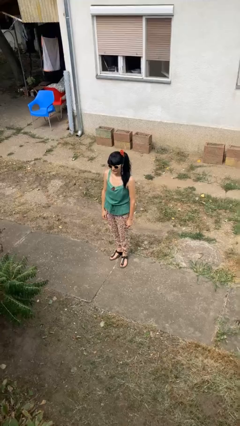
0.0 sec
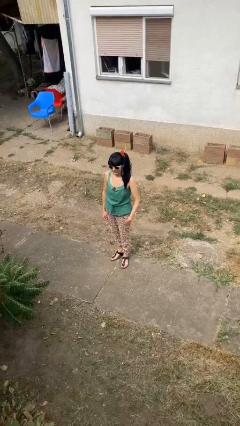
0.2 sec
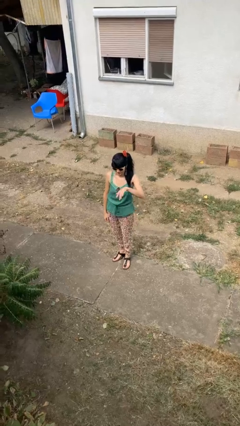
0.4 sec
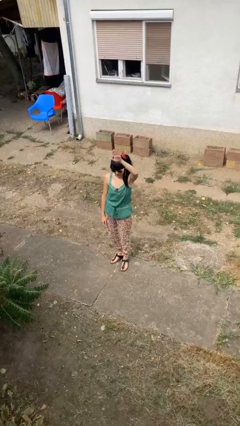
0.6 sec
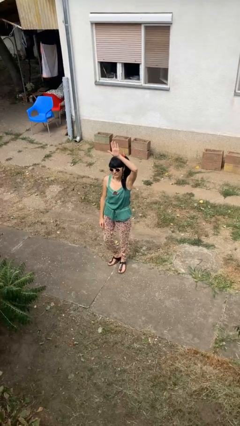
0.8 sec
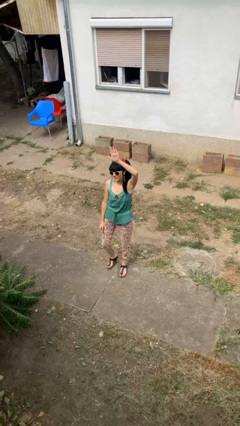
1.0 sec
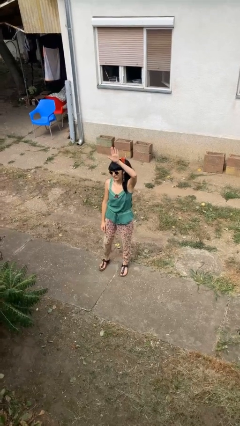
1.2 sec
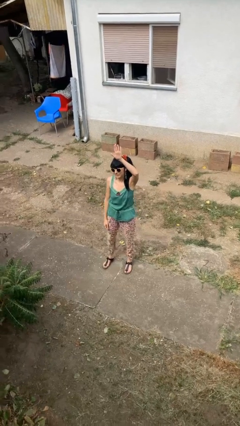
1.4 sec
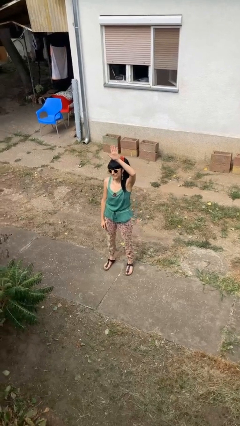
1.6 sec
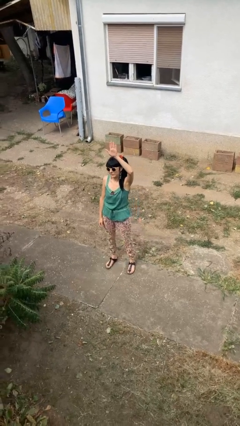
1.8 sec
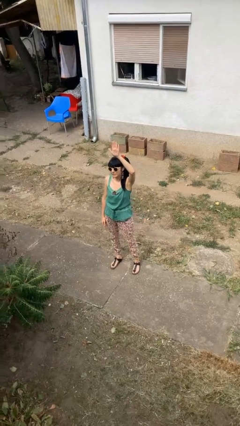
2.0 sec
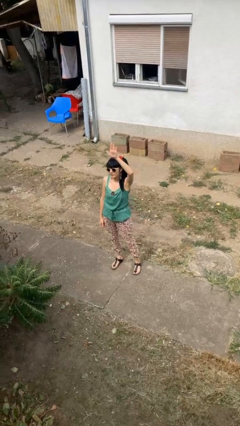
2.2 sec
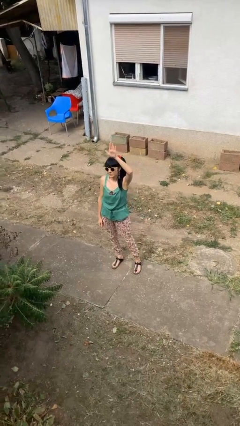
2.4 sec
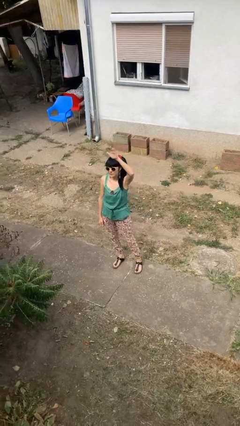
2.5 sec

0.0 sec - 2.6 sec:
person gestures raise hand

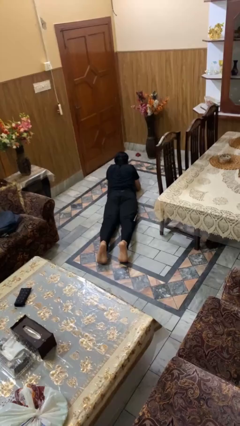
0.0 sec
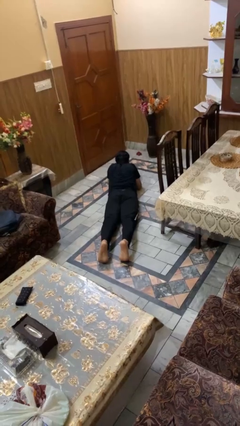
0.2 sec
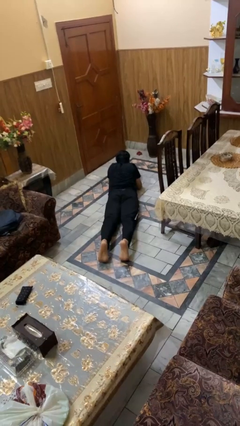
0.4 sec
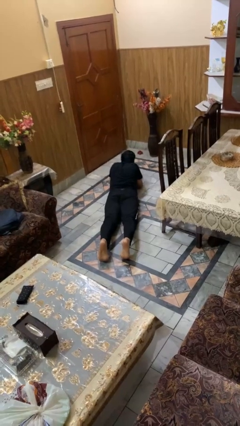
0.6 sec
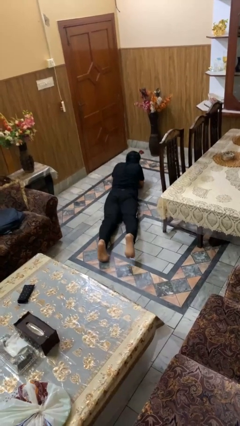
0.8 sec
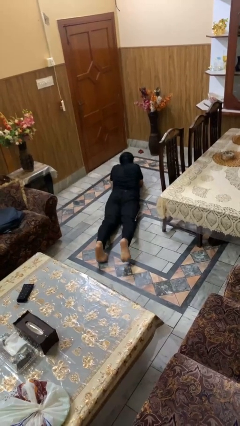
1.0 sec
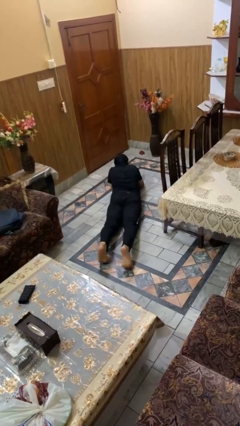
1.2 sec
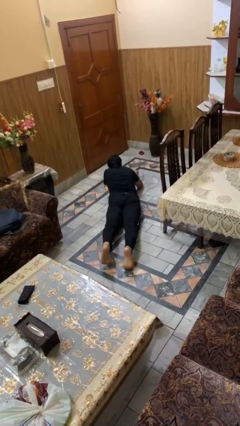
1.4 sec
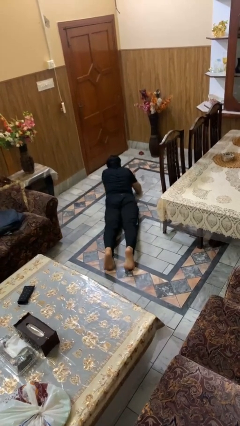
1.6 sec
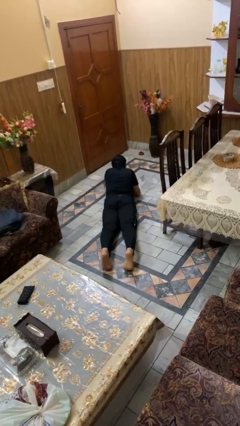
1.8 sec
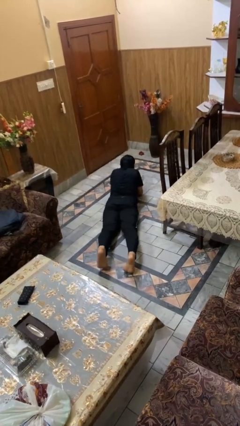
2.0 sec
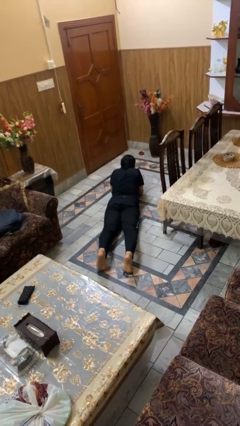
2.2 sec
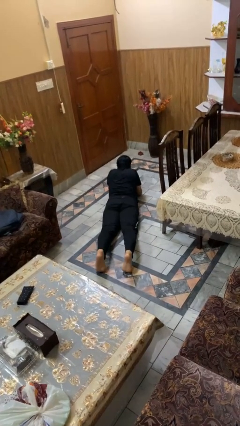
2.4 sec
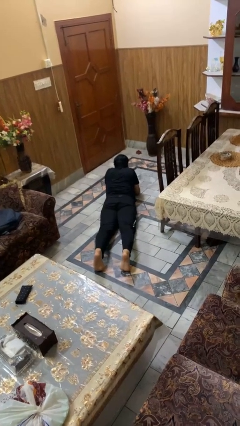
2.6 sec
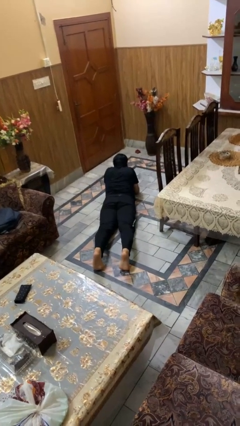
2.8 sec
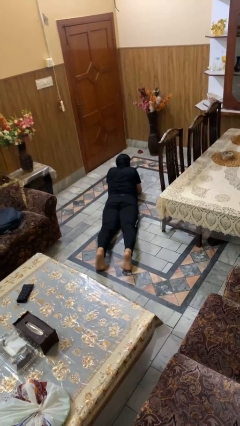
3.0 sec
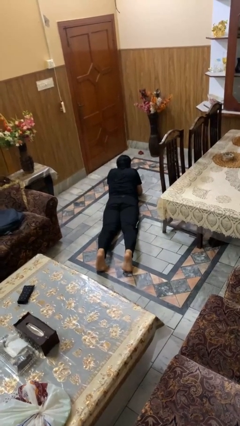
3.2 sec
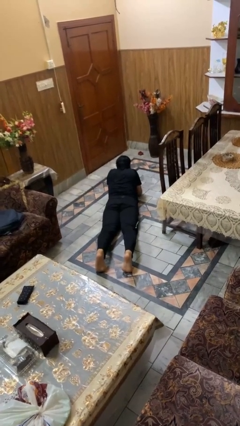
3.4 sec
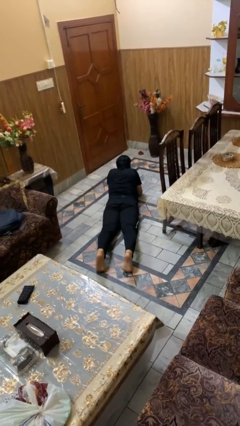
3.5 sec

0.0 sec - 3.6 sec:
person crawls

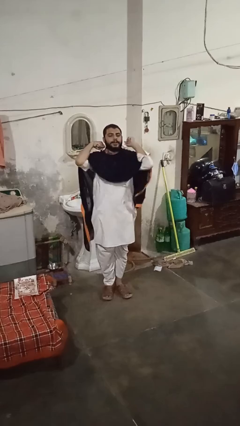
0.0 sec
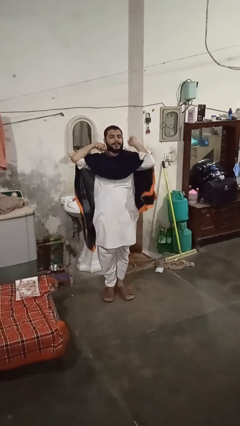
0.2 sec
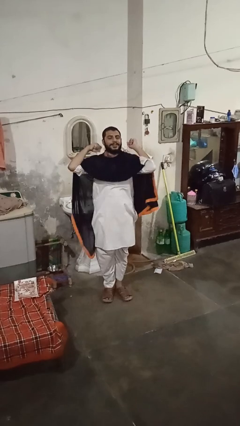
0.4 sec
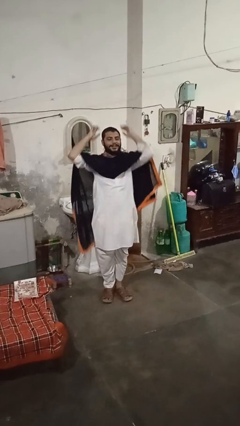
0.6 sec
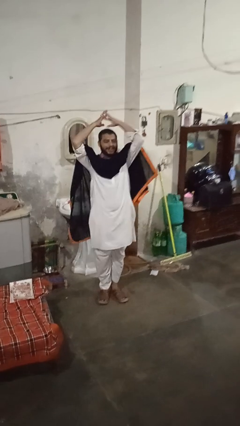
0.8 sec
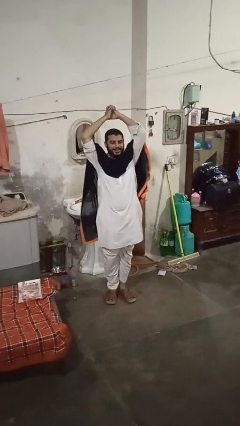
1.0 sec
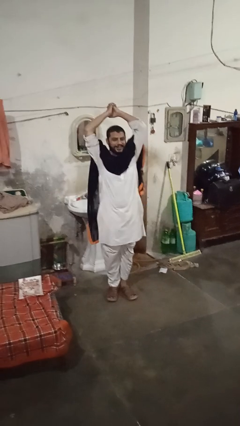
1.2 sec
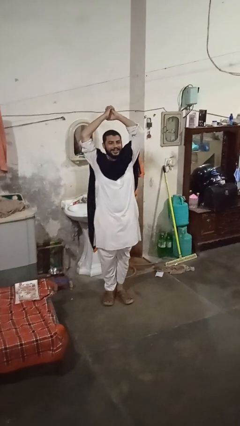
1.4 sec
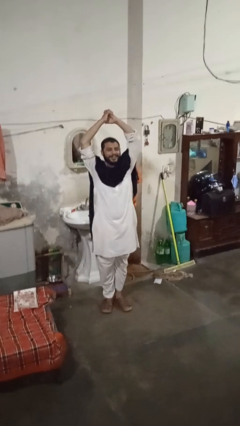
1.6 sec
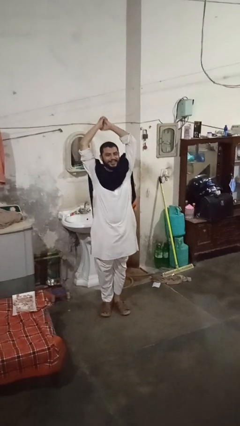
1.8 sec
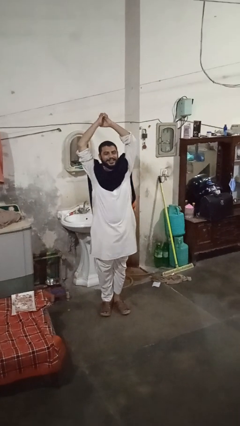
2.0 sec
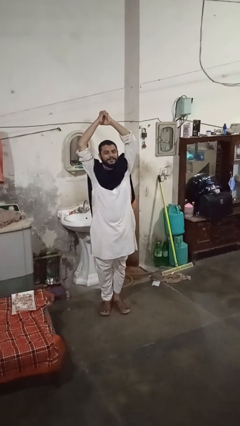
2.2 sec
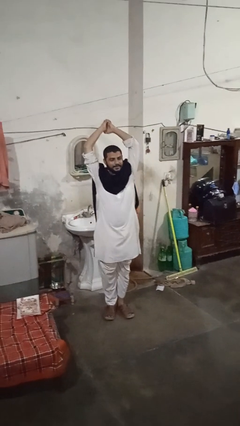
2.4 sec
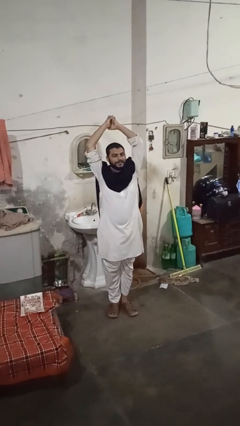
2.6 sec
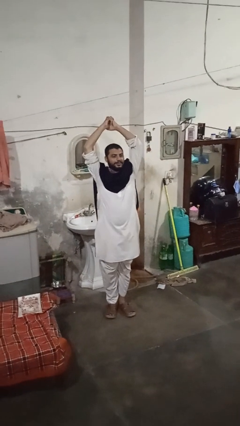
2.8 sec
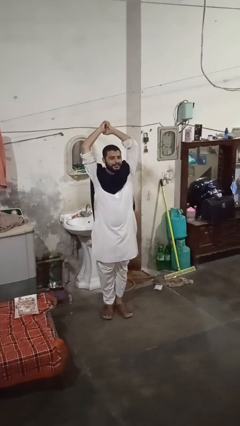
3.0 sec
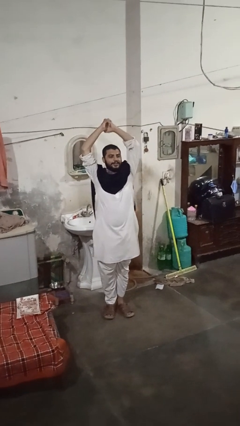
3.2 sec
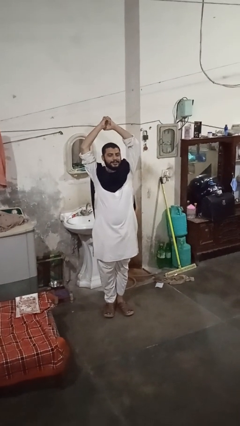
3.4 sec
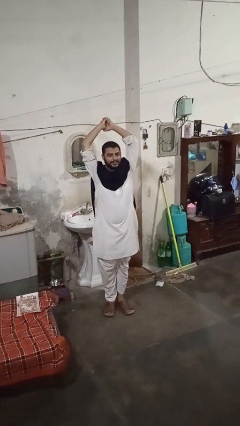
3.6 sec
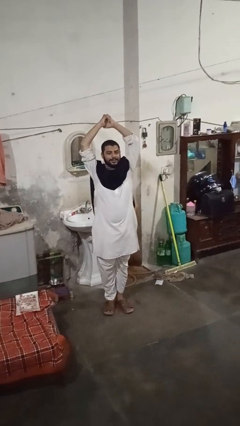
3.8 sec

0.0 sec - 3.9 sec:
person stretches arms over head

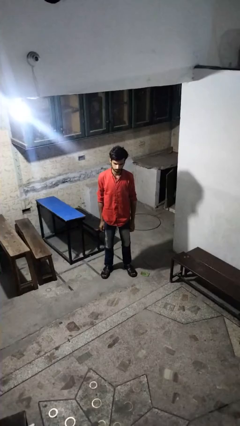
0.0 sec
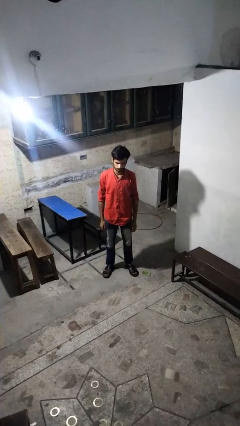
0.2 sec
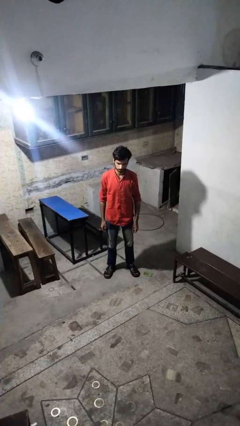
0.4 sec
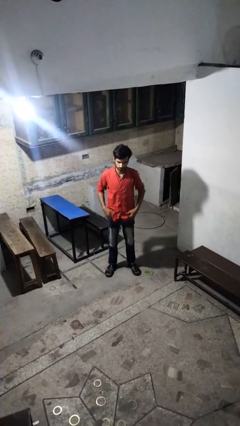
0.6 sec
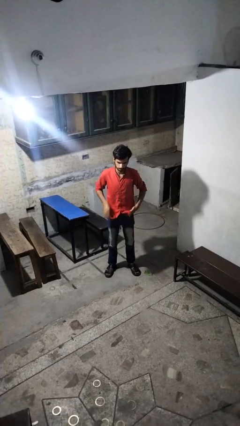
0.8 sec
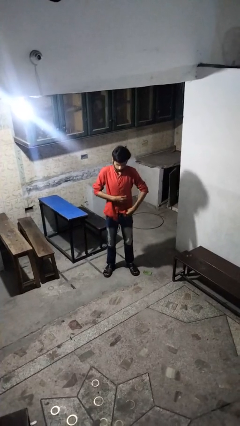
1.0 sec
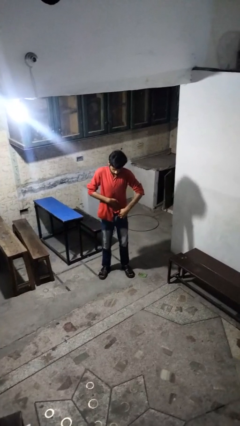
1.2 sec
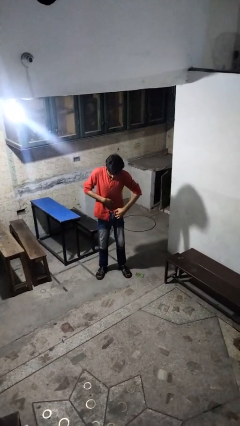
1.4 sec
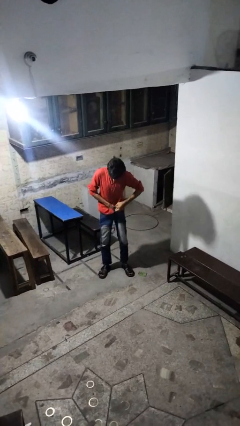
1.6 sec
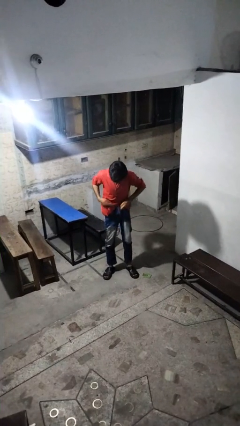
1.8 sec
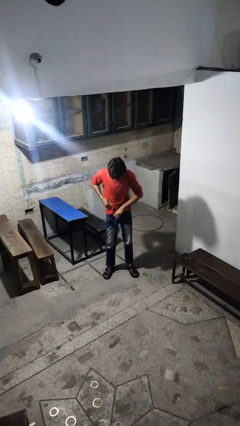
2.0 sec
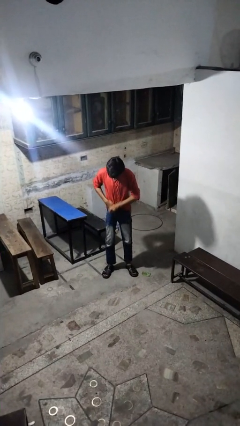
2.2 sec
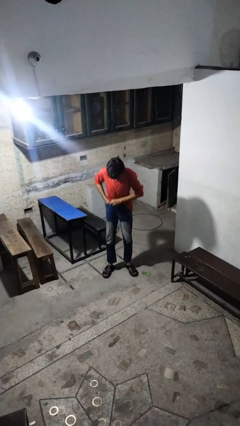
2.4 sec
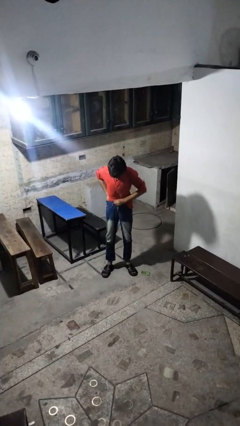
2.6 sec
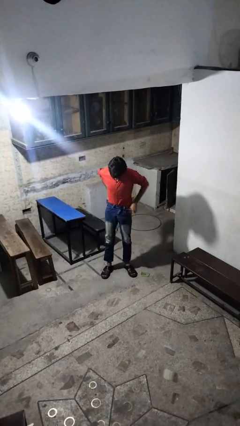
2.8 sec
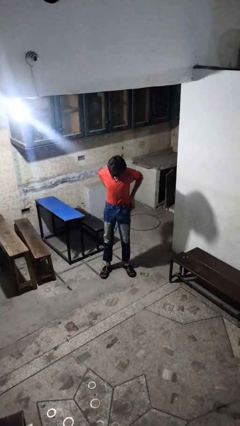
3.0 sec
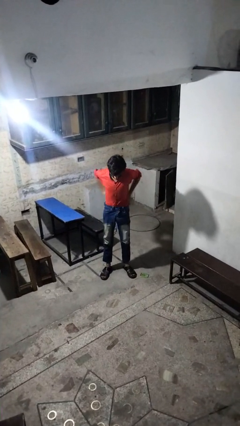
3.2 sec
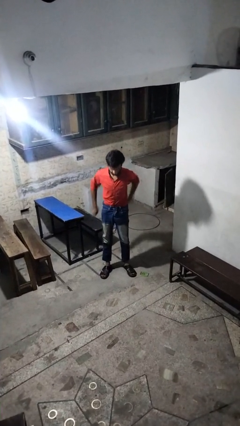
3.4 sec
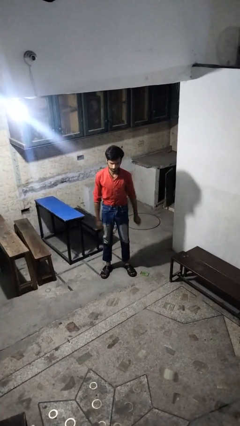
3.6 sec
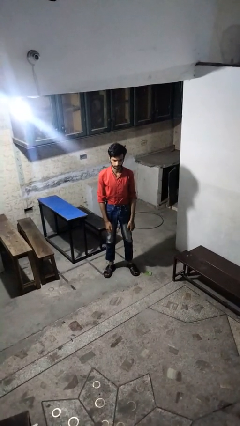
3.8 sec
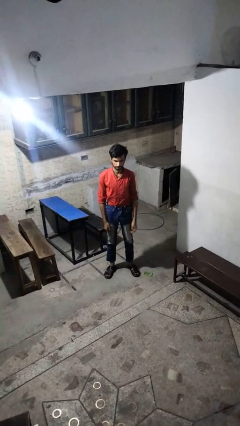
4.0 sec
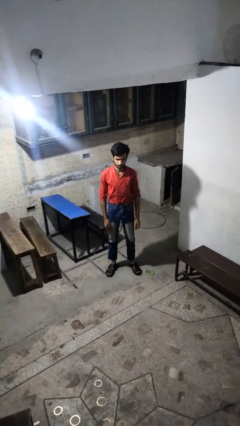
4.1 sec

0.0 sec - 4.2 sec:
person tucks in shirt

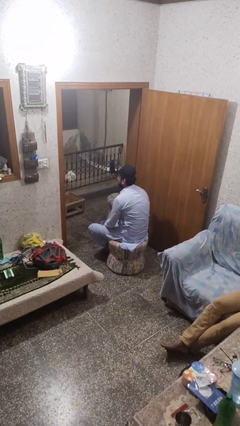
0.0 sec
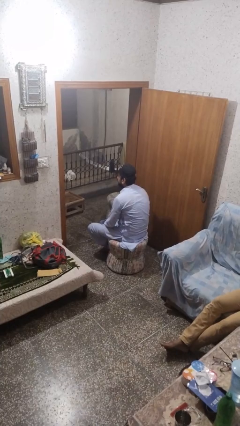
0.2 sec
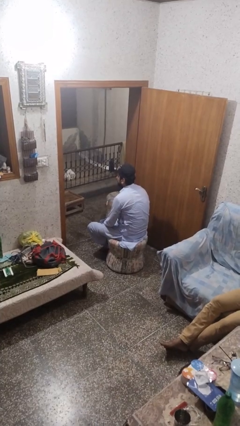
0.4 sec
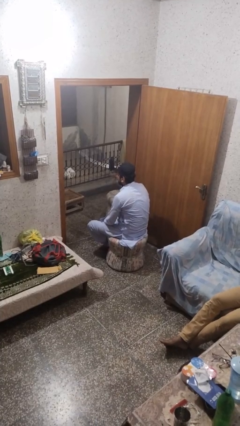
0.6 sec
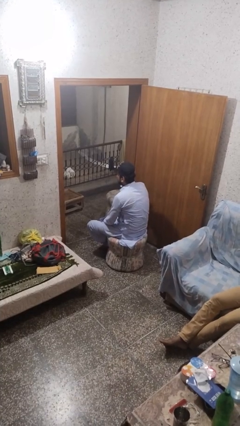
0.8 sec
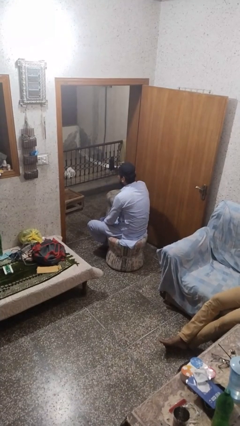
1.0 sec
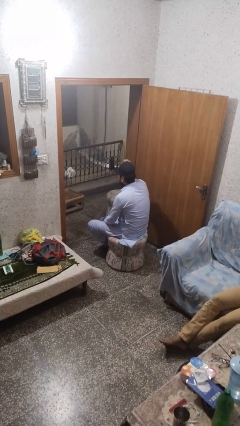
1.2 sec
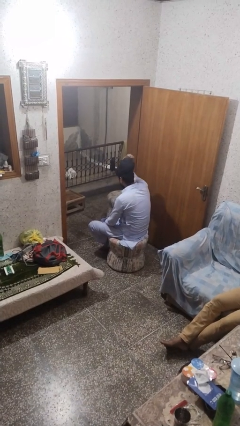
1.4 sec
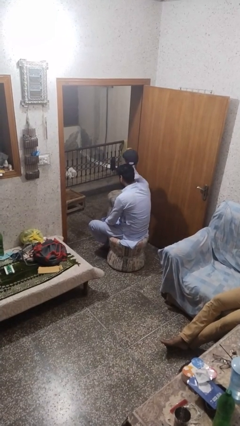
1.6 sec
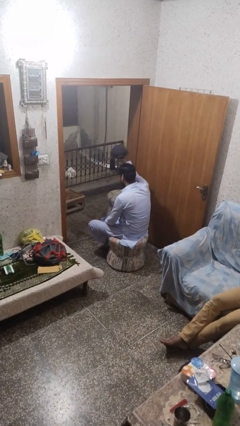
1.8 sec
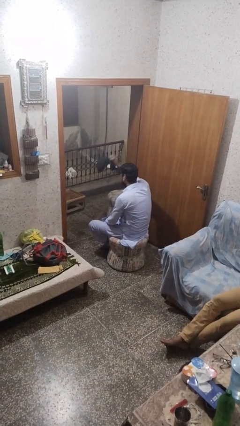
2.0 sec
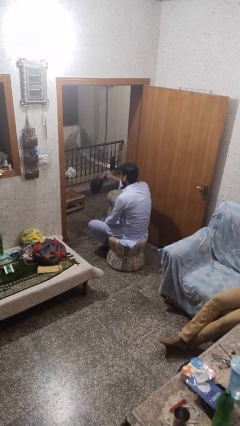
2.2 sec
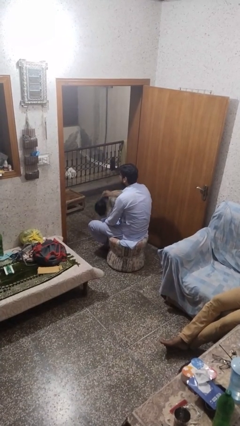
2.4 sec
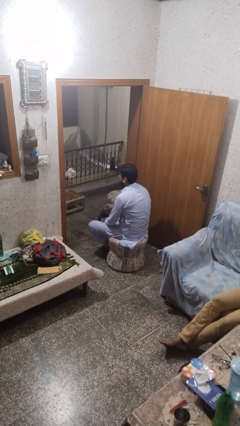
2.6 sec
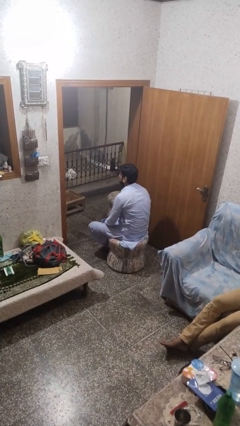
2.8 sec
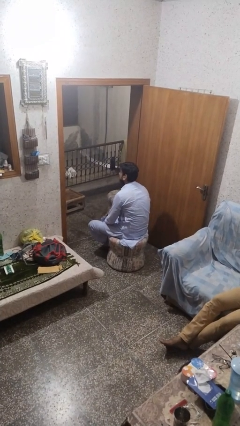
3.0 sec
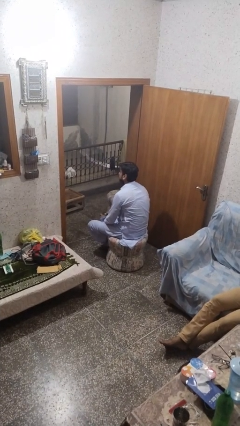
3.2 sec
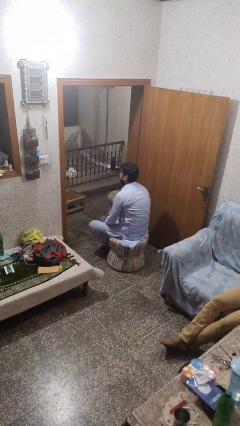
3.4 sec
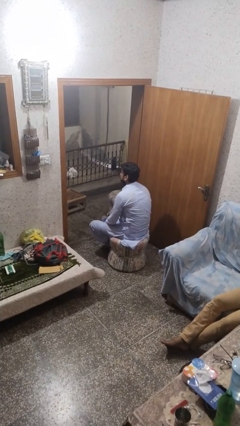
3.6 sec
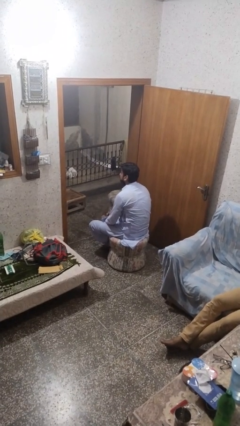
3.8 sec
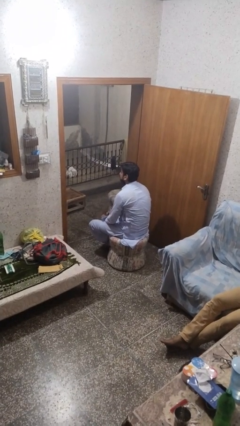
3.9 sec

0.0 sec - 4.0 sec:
person takes off hat
